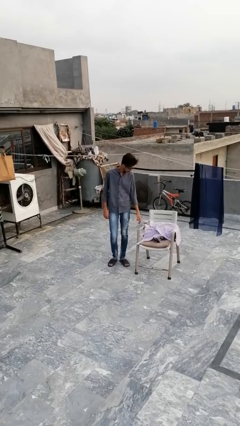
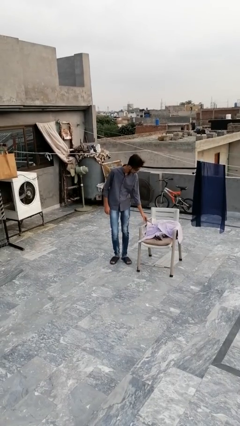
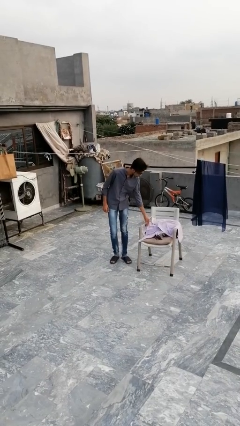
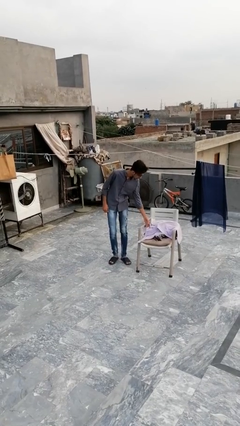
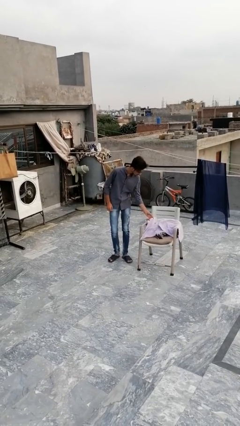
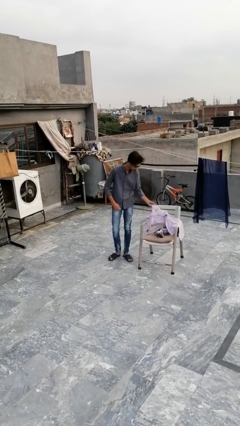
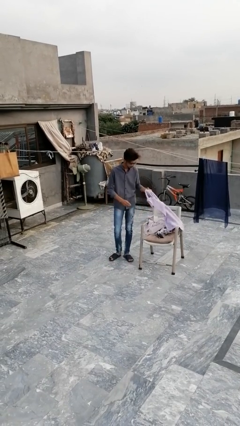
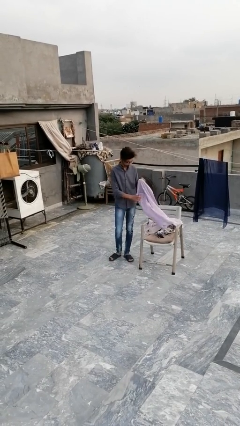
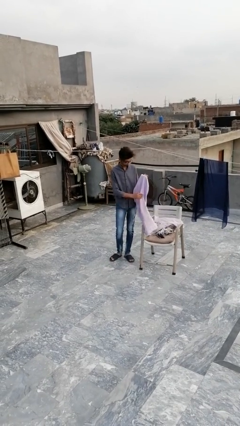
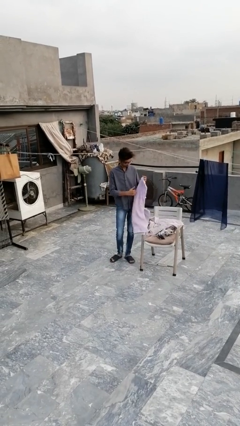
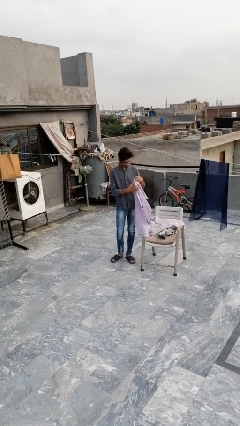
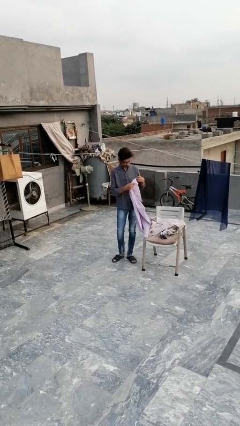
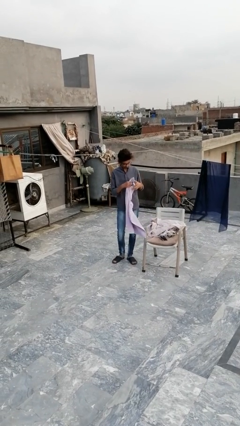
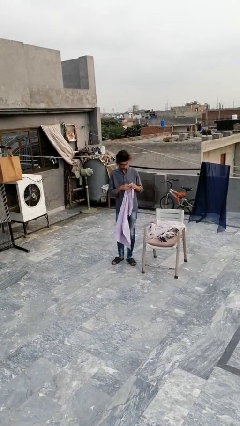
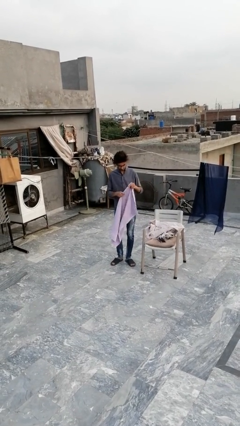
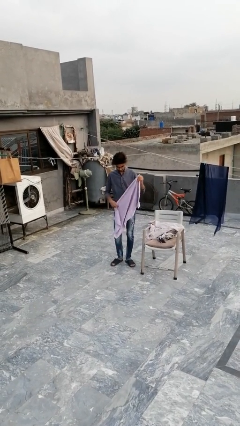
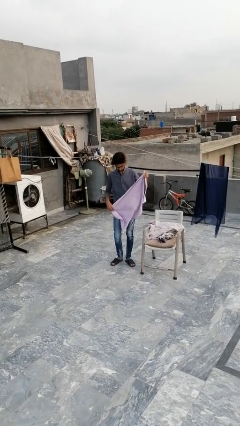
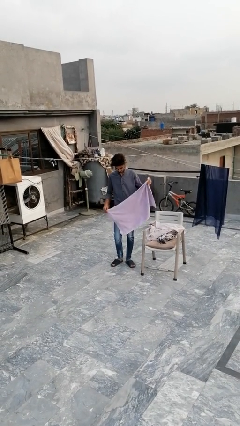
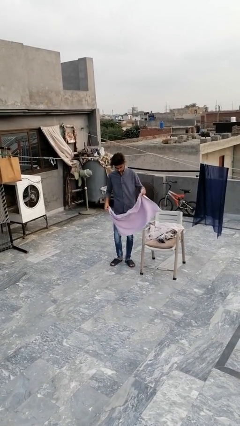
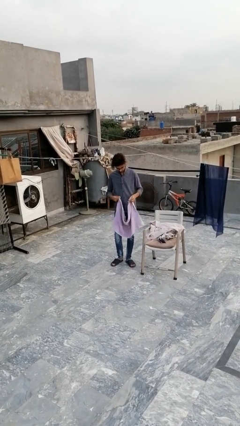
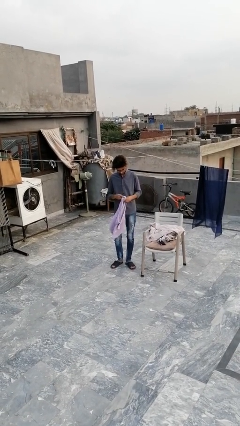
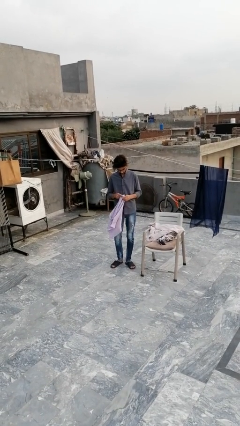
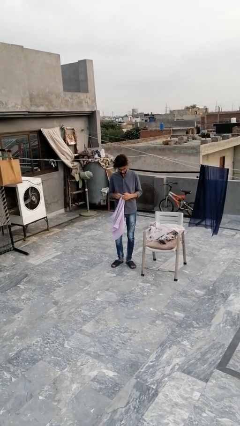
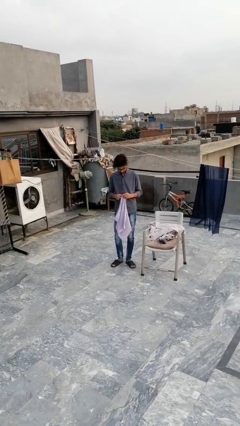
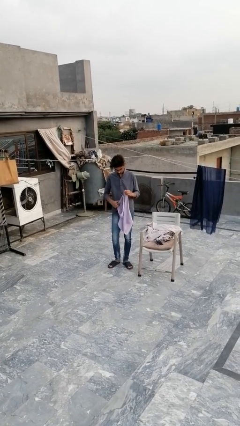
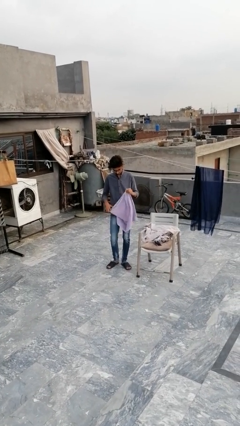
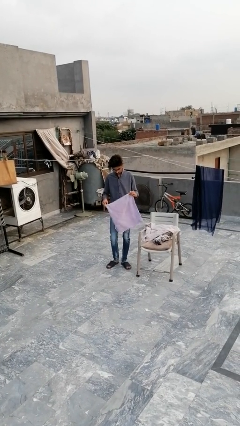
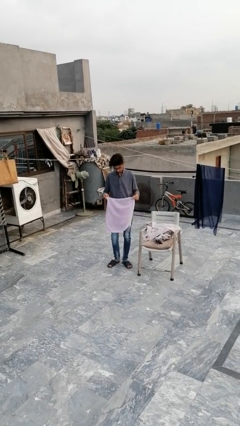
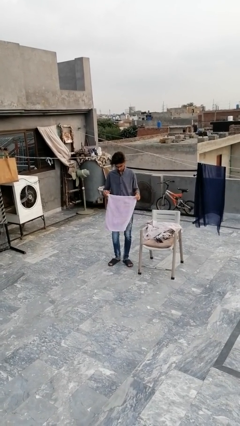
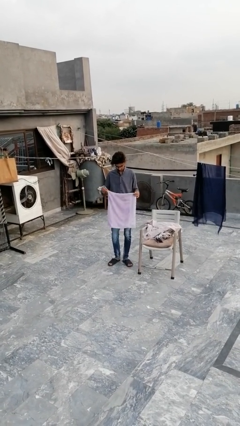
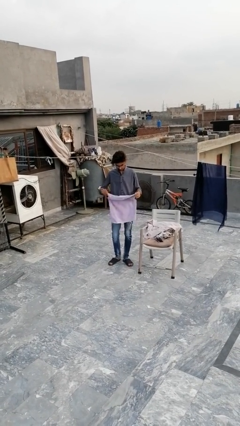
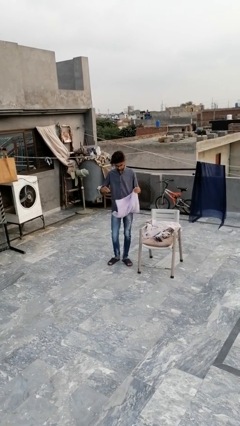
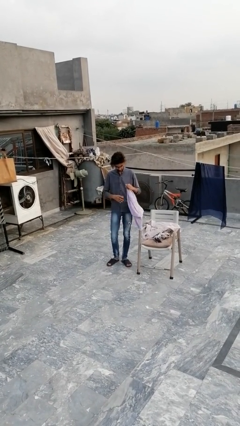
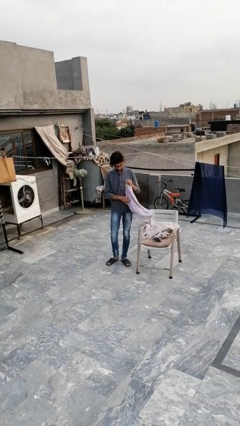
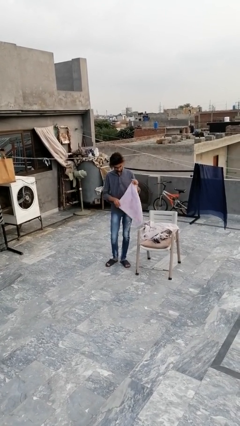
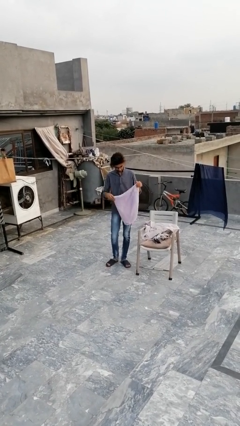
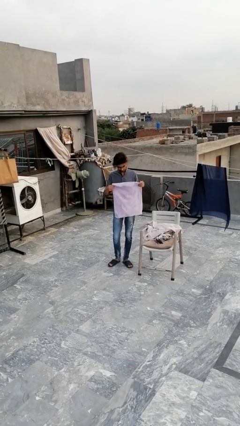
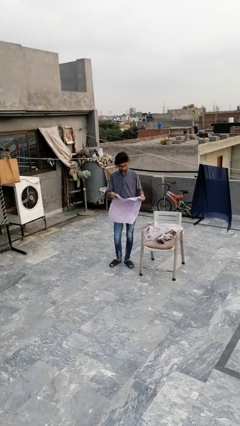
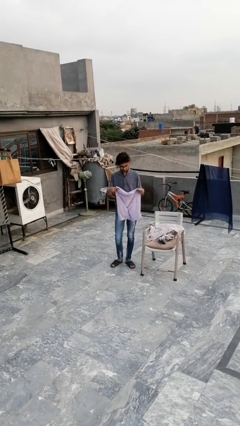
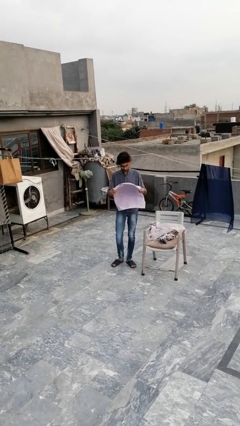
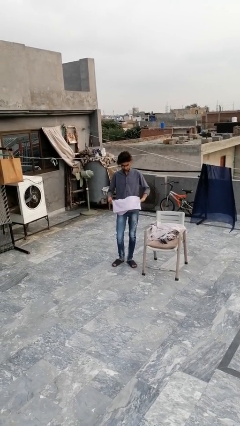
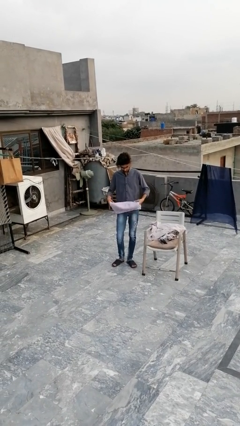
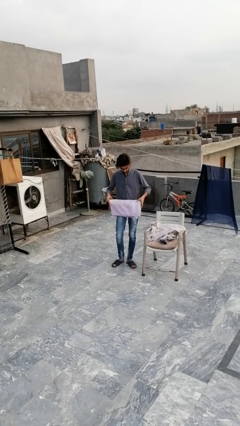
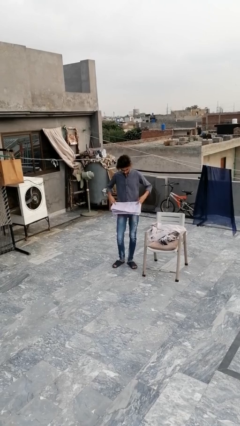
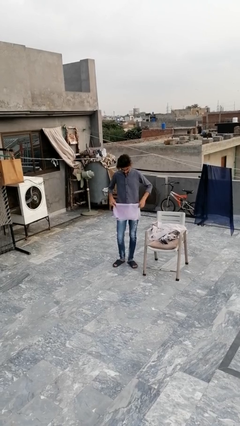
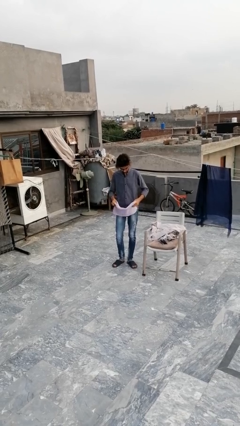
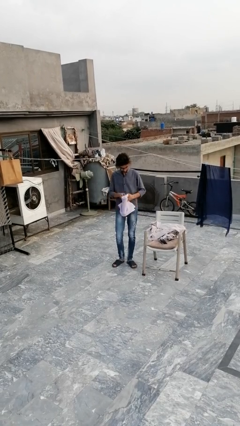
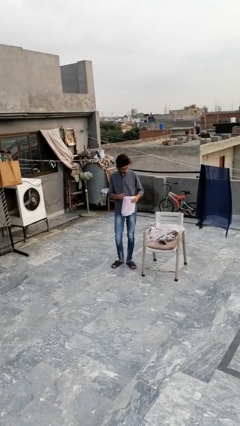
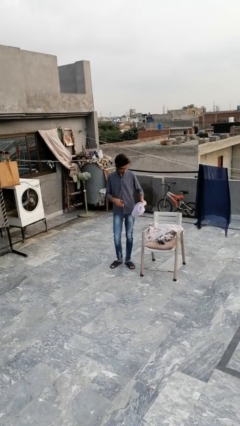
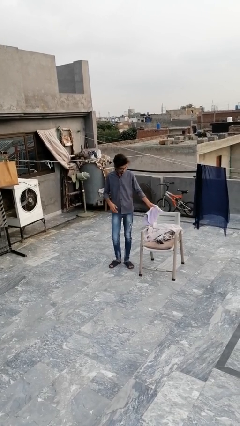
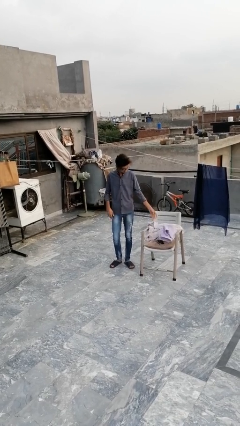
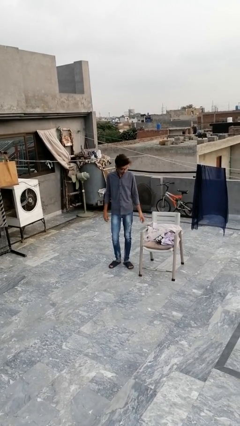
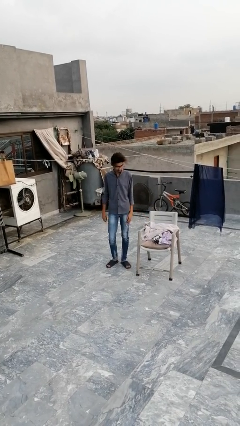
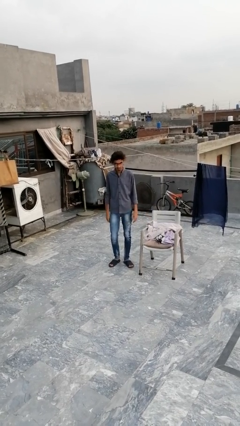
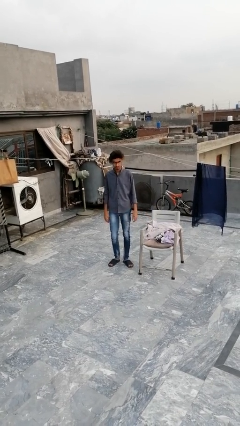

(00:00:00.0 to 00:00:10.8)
person folds towel

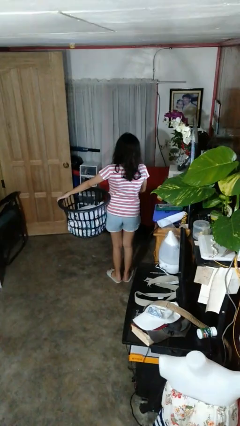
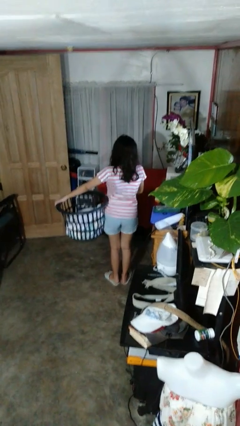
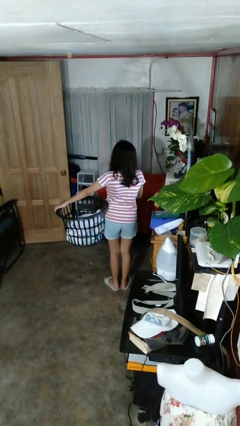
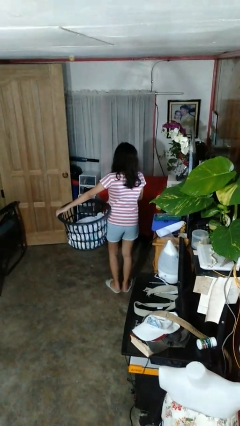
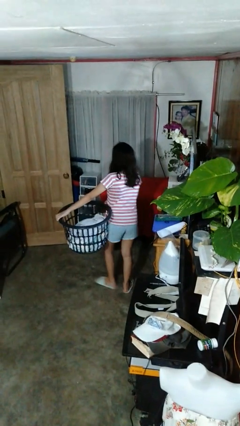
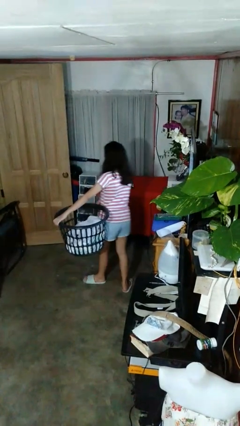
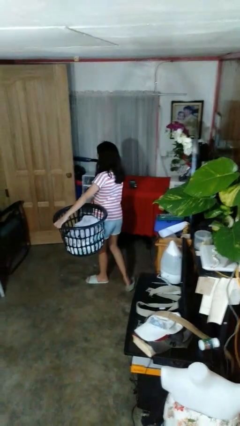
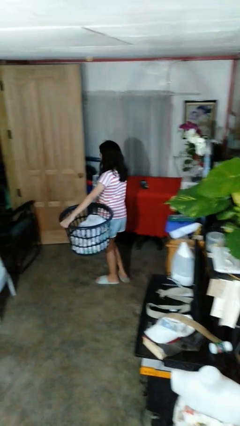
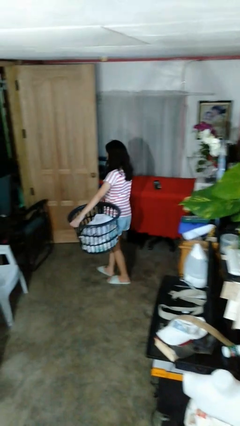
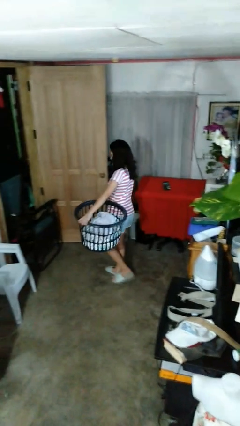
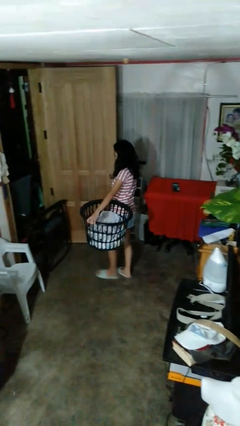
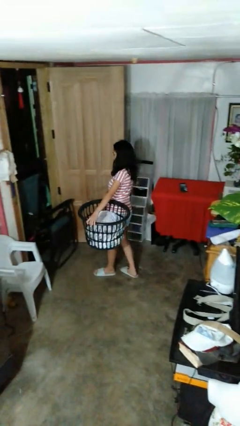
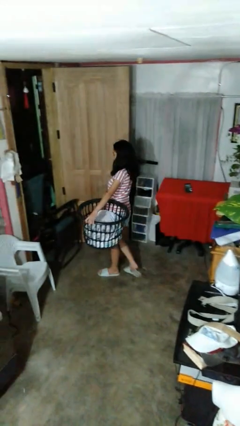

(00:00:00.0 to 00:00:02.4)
person carries laundry basket

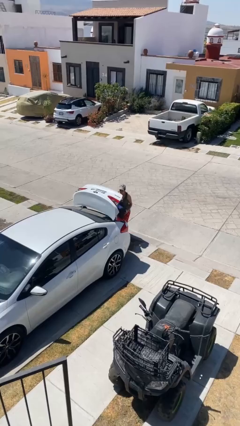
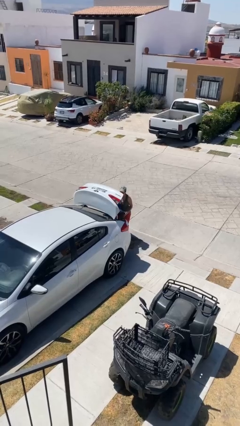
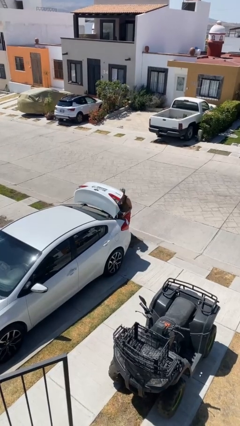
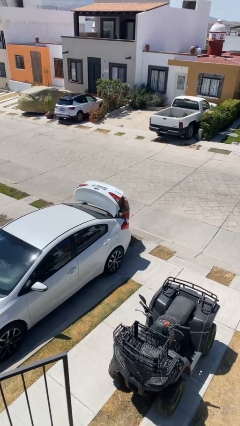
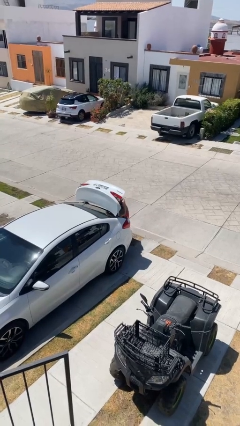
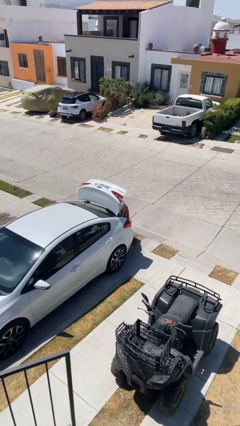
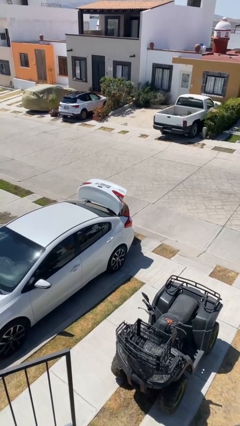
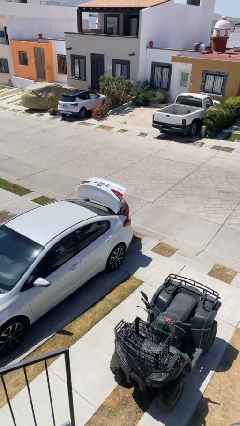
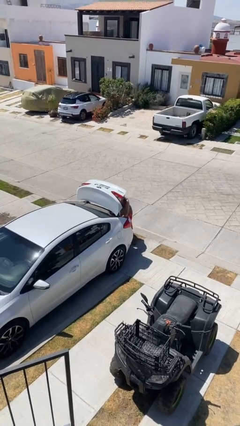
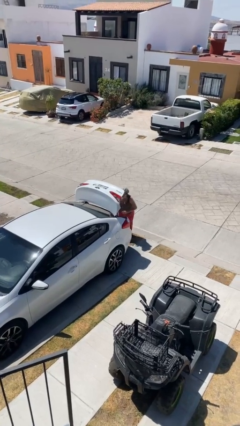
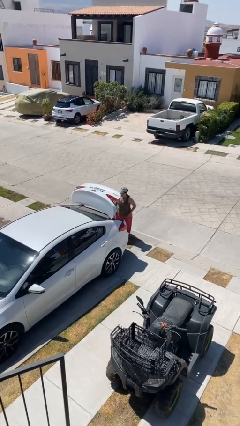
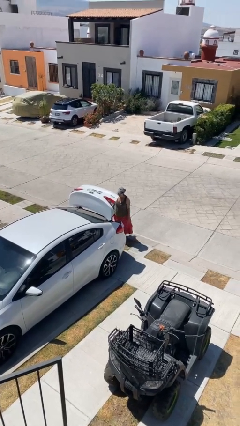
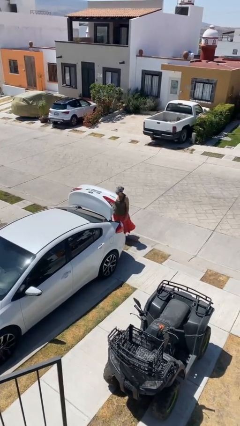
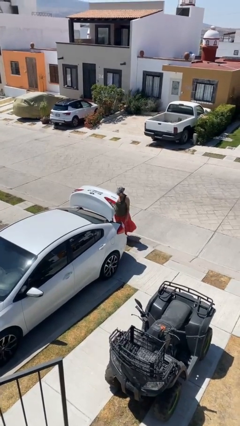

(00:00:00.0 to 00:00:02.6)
person loads car

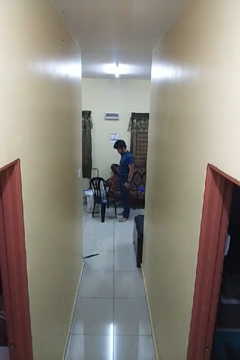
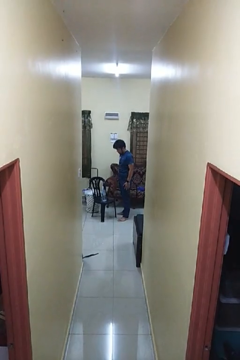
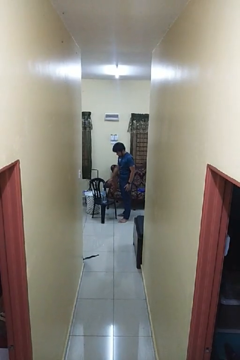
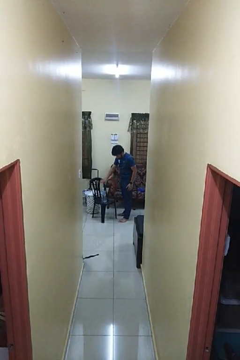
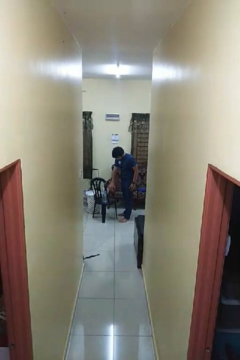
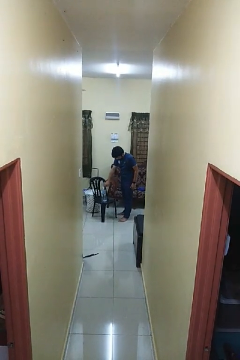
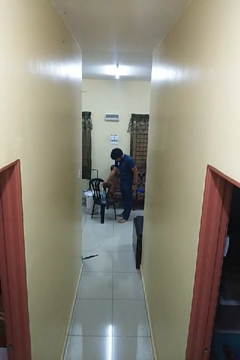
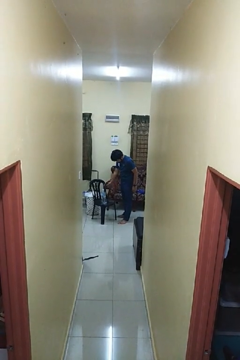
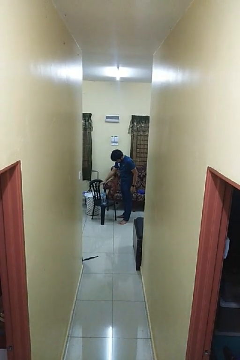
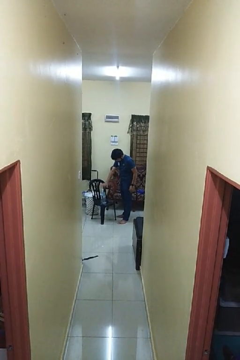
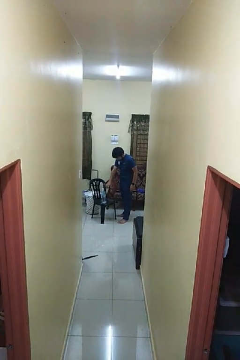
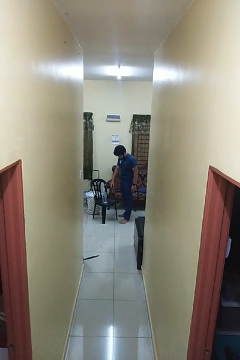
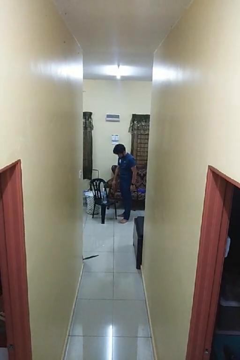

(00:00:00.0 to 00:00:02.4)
person waves hand over object
